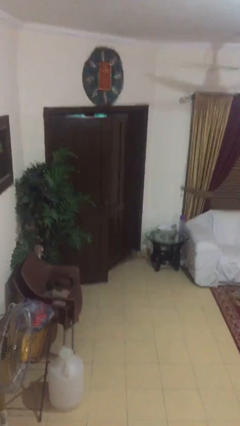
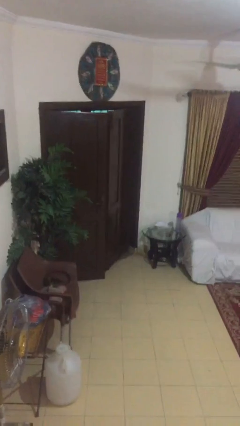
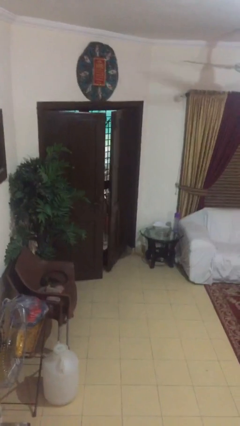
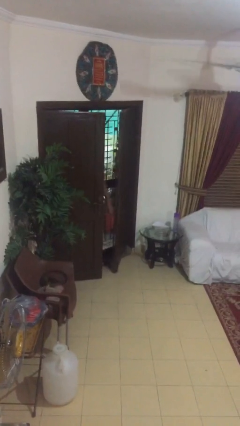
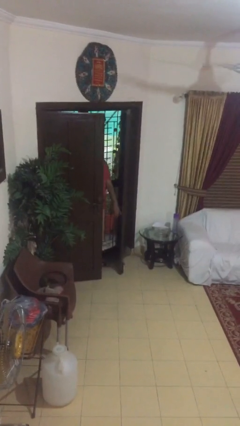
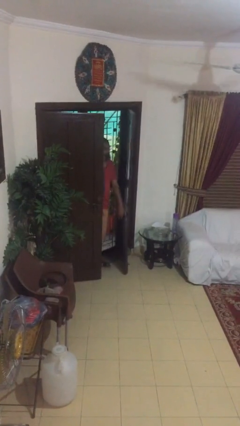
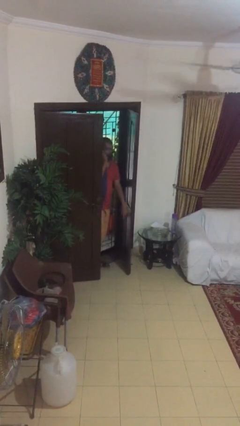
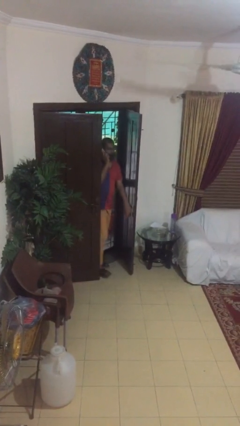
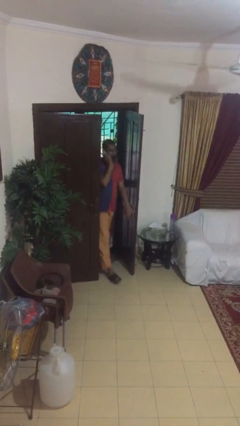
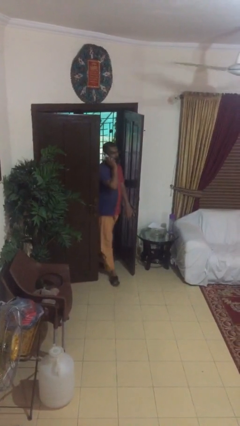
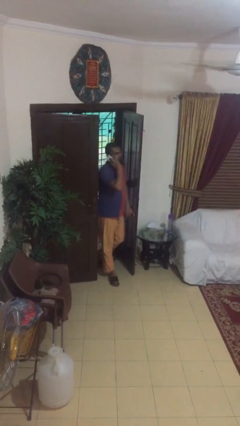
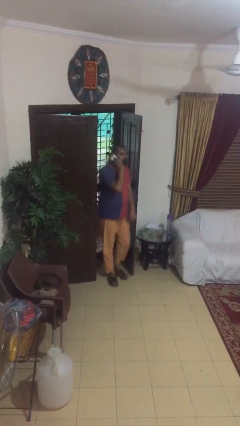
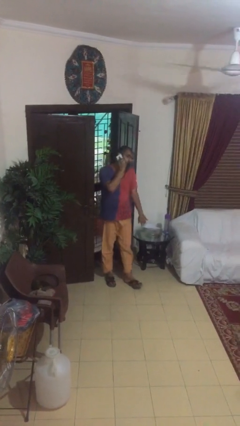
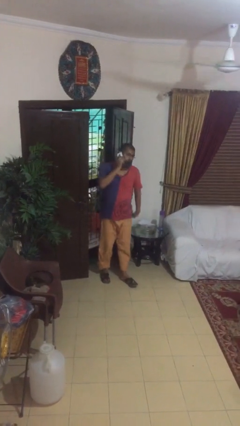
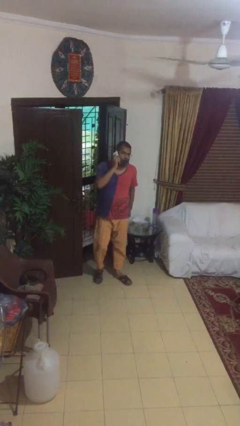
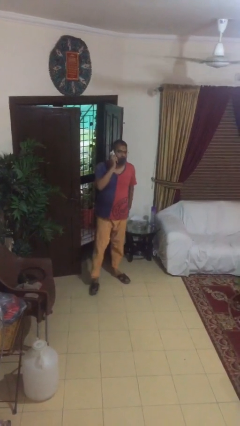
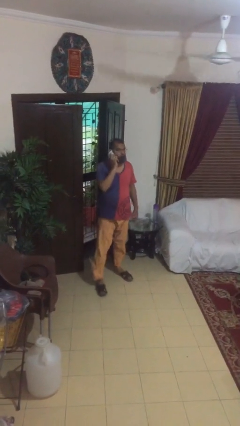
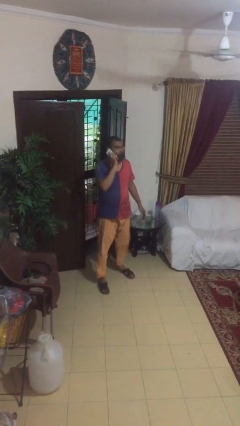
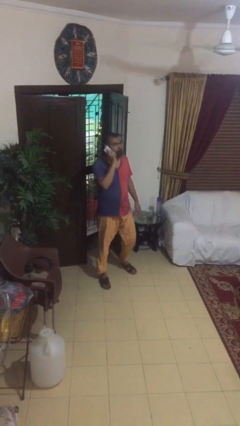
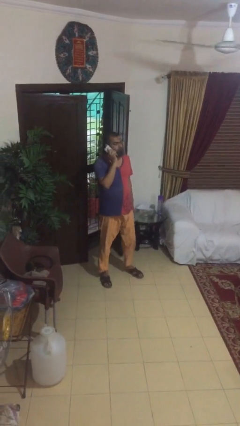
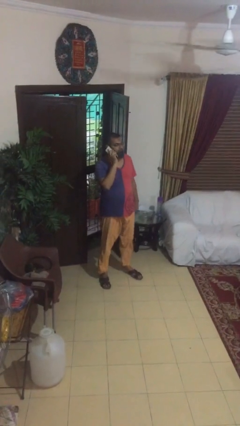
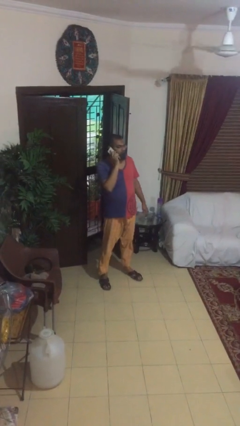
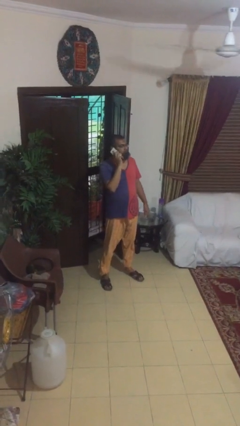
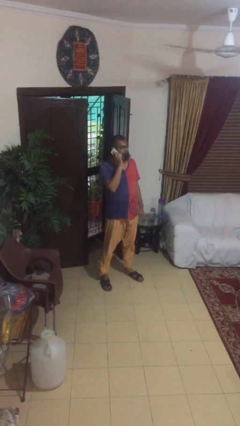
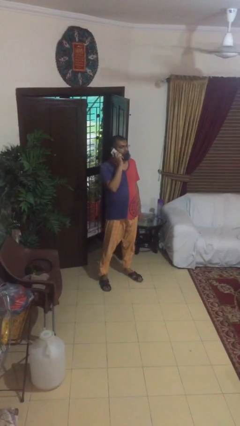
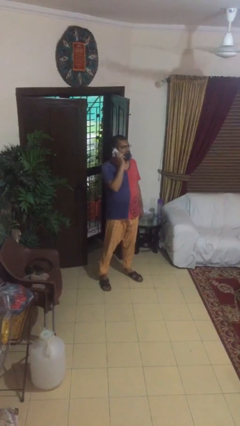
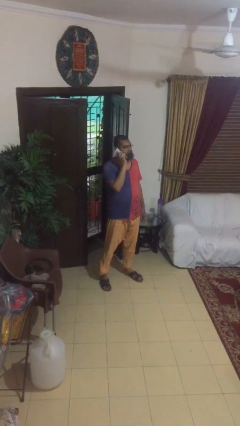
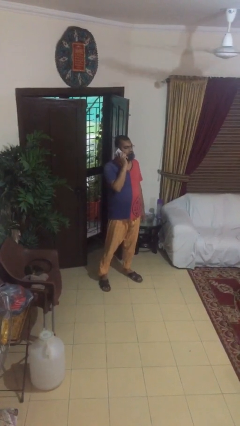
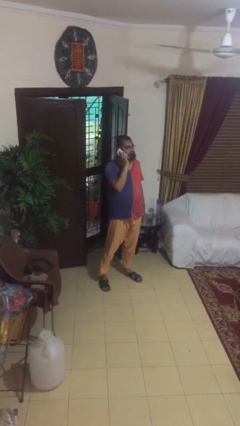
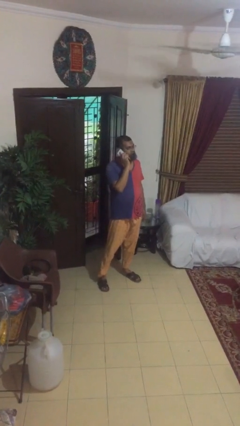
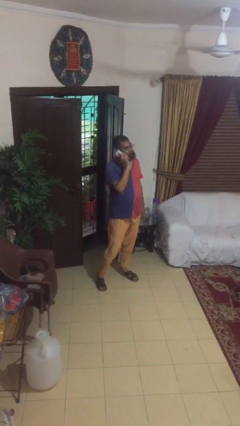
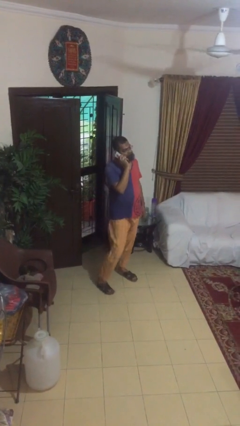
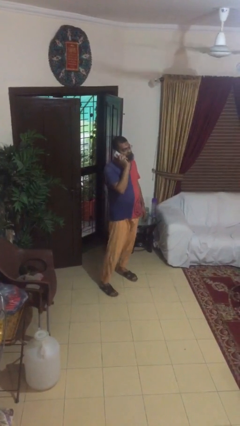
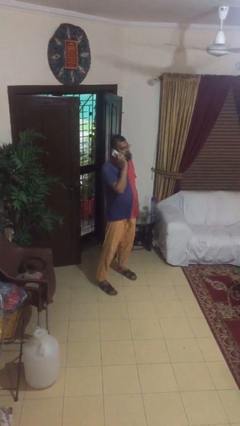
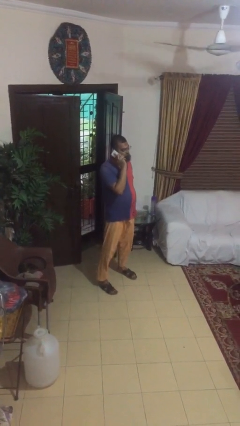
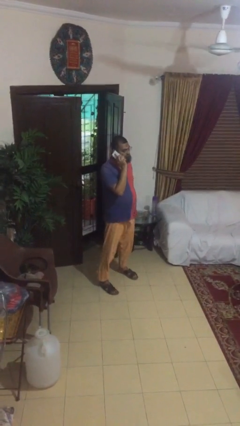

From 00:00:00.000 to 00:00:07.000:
person enters scene through structure

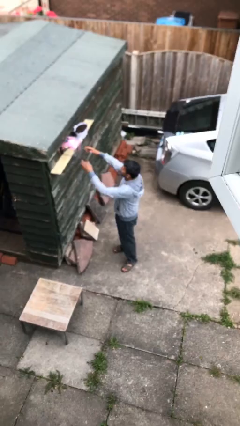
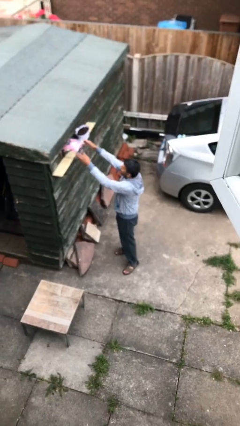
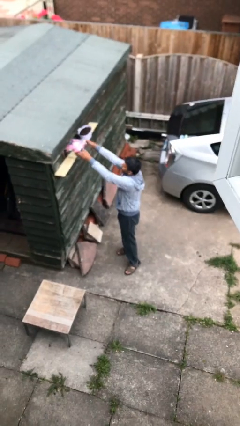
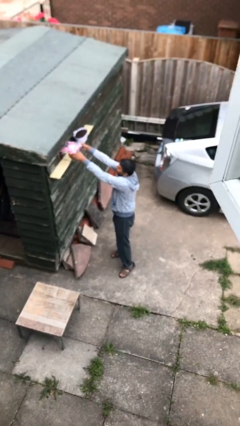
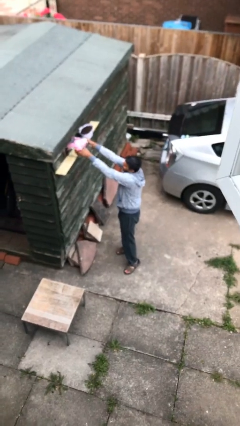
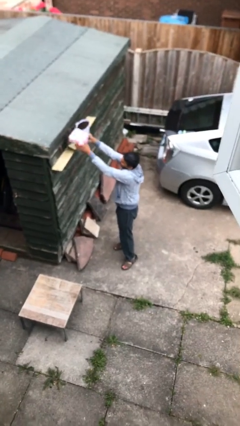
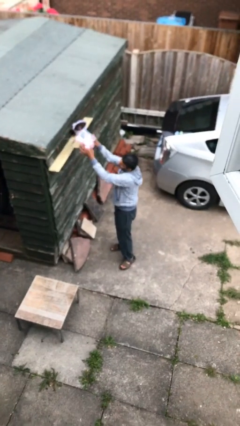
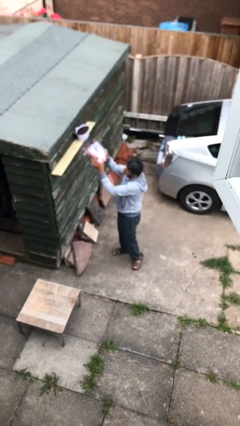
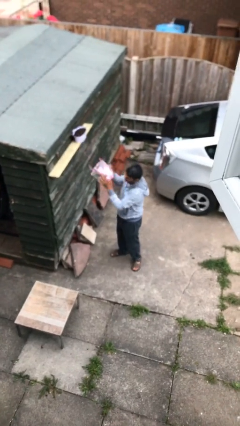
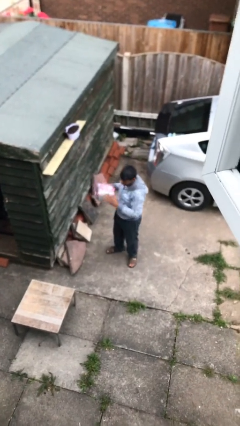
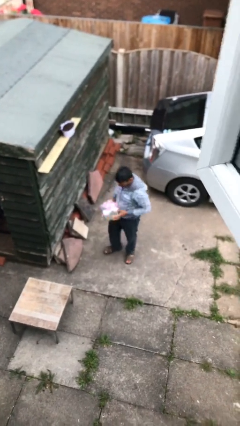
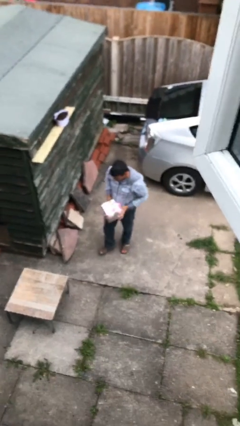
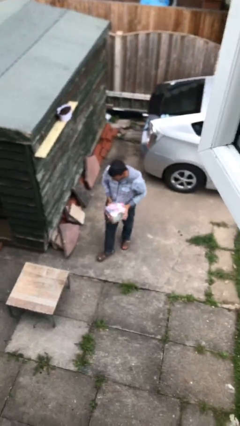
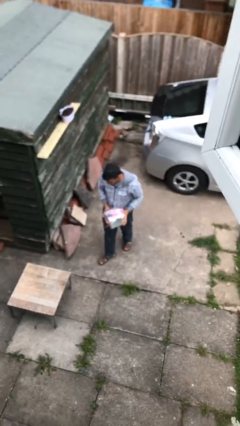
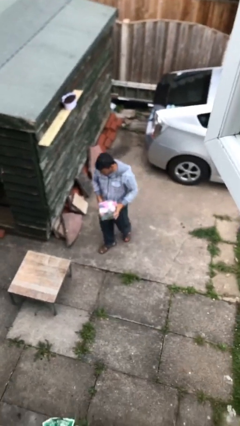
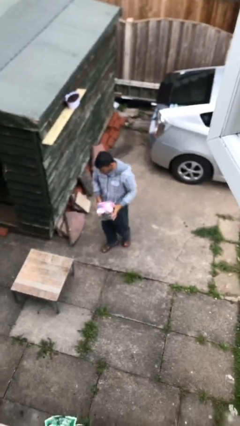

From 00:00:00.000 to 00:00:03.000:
person picks up object from shelf

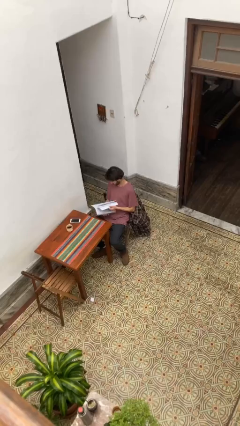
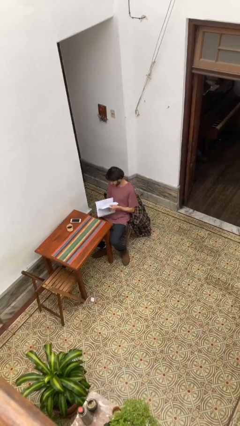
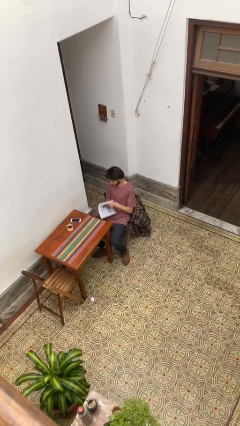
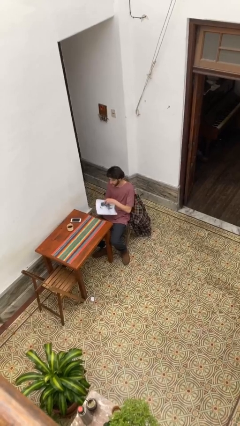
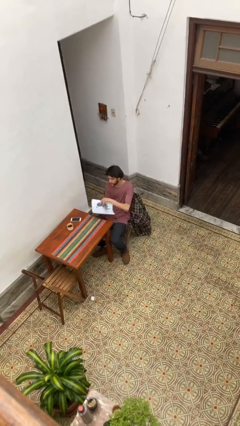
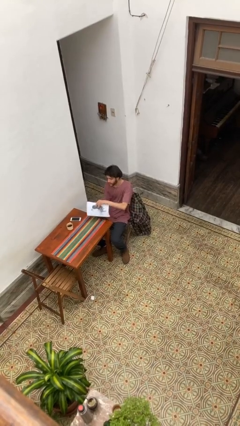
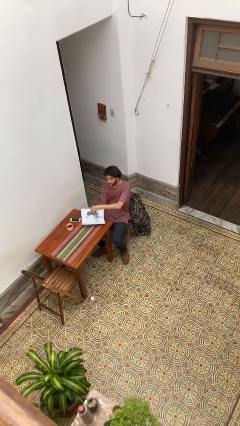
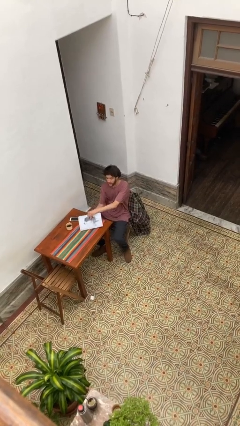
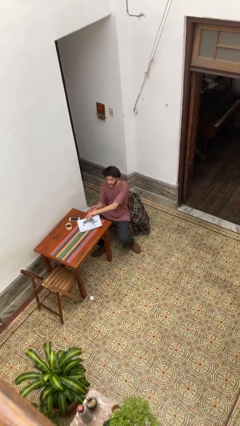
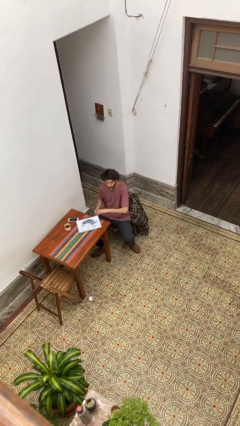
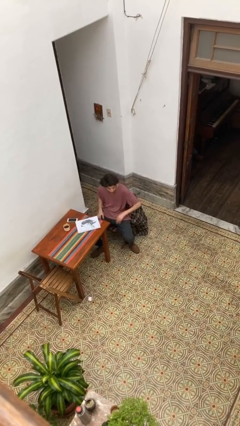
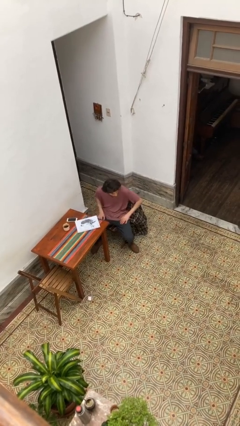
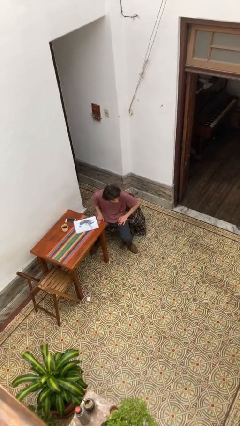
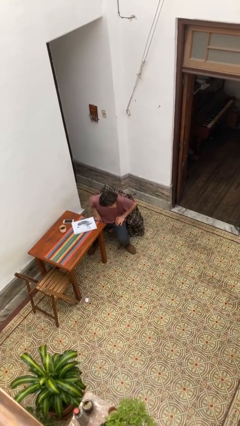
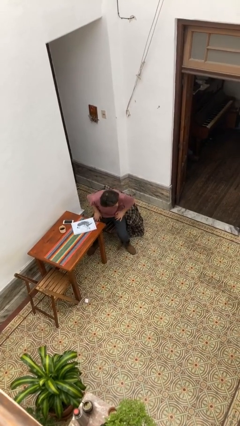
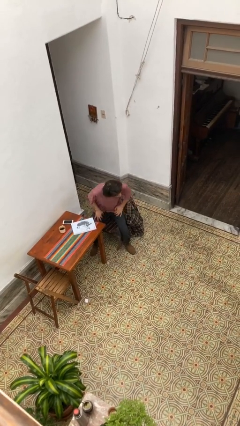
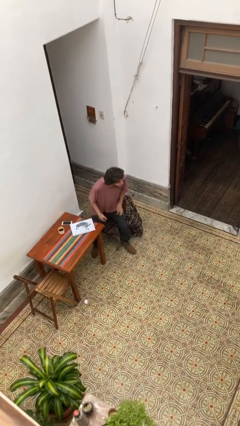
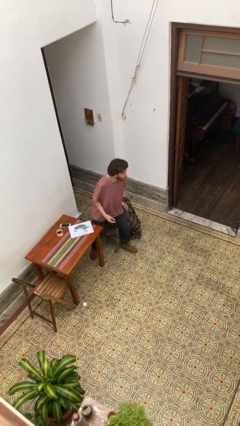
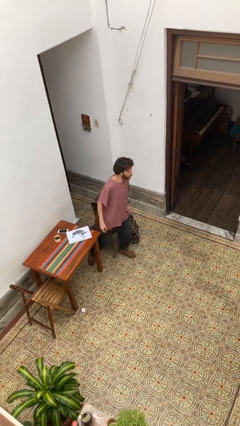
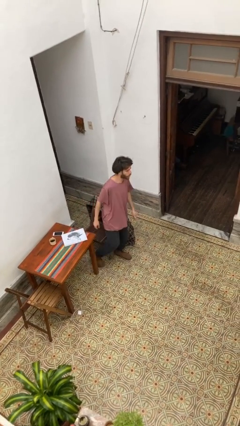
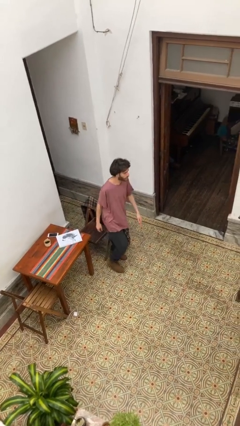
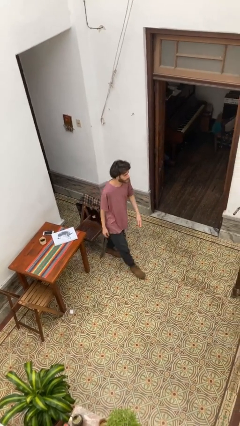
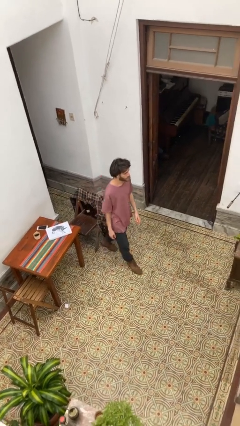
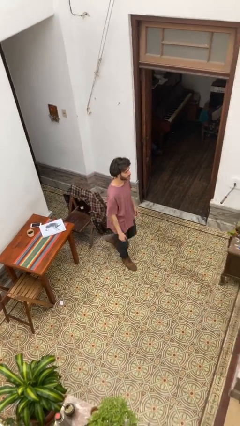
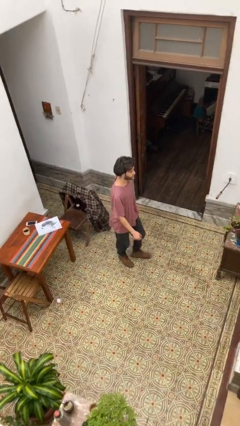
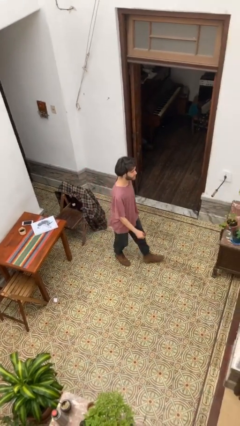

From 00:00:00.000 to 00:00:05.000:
person stands up

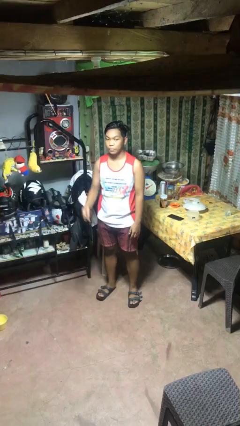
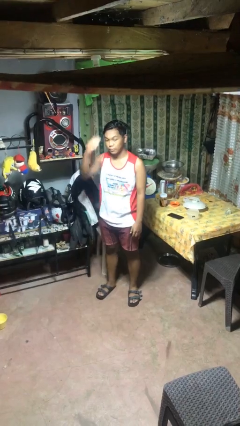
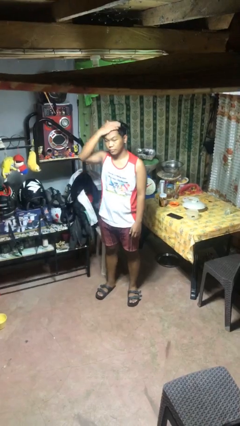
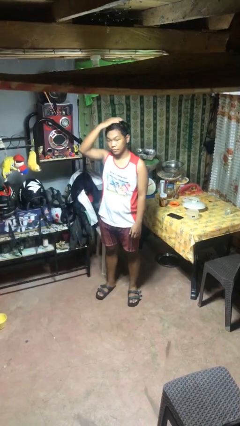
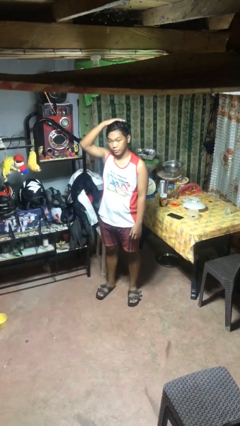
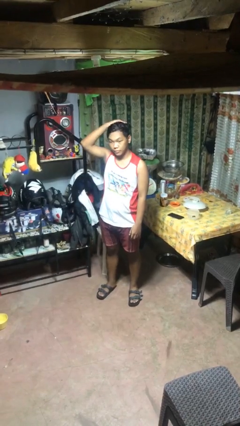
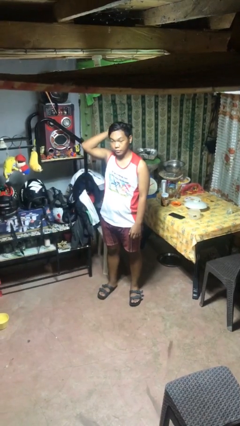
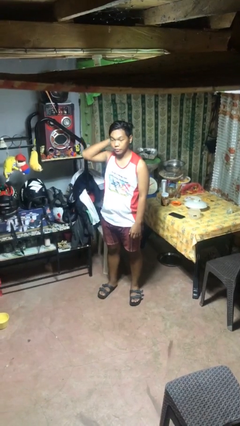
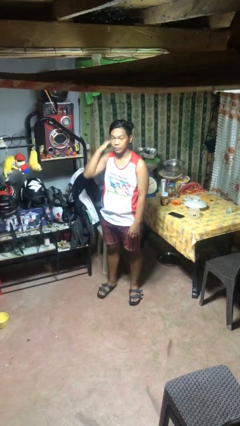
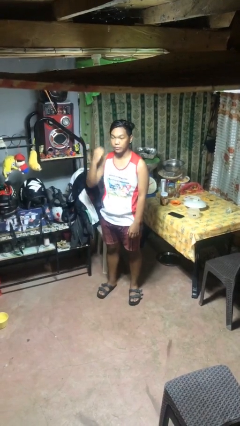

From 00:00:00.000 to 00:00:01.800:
person pats head

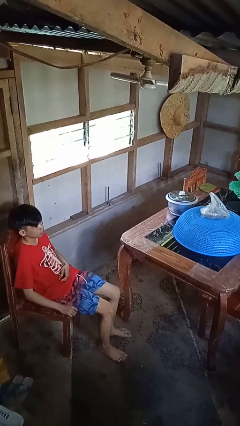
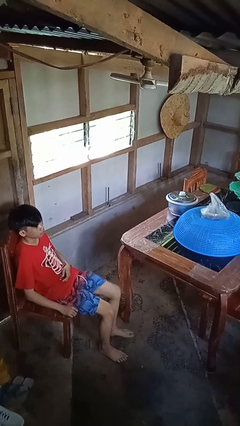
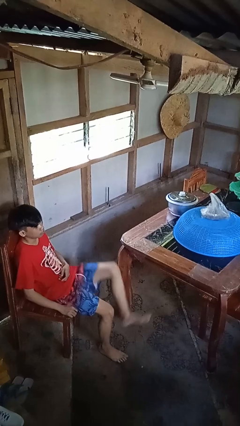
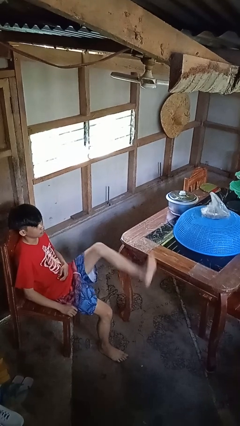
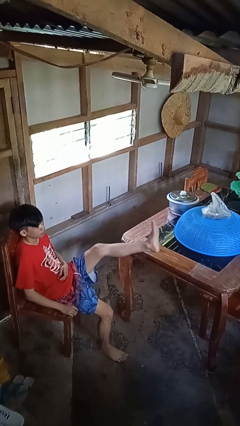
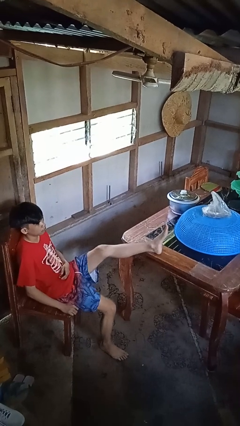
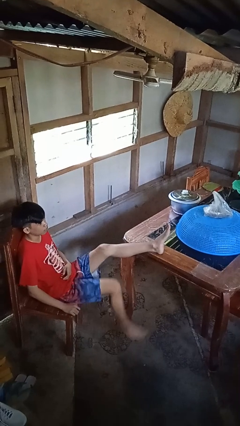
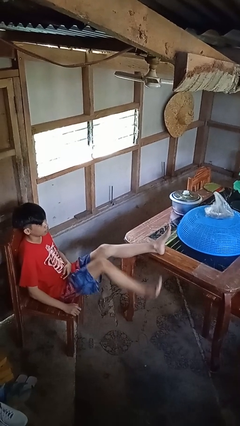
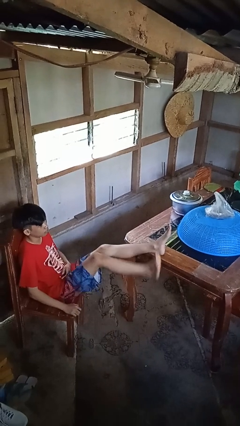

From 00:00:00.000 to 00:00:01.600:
person puts feet up
